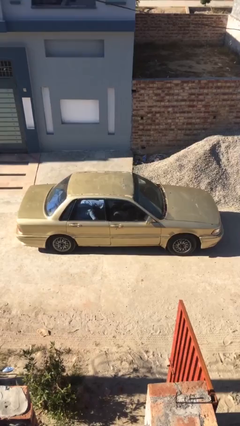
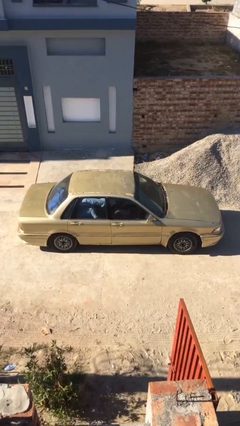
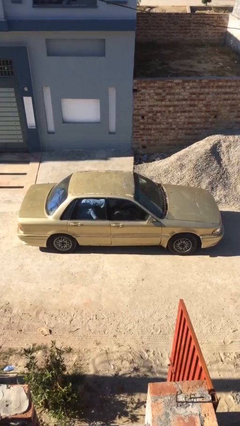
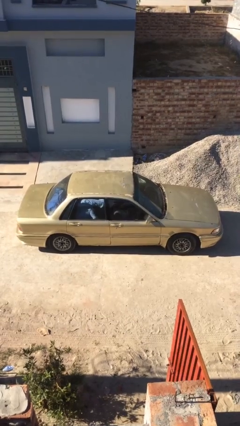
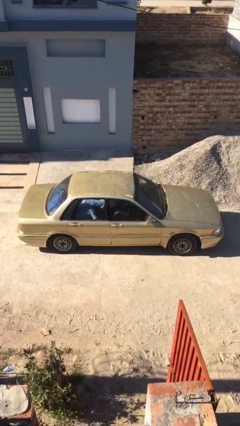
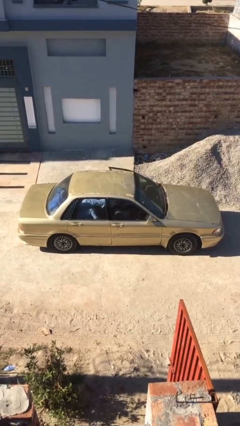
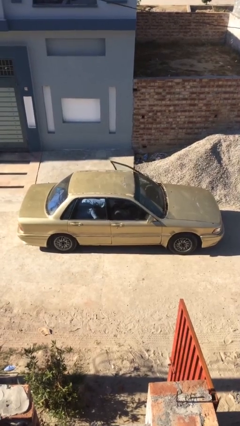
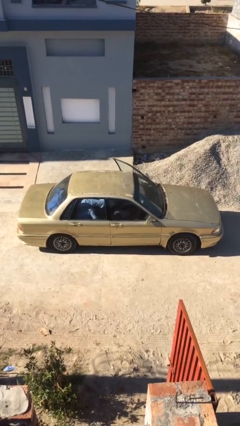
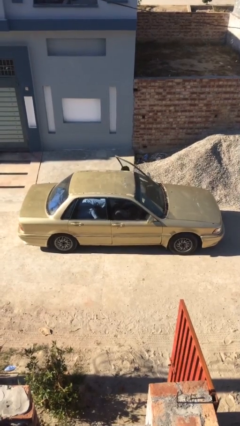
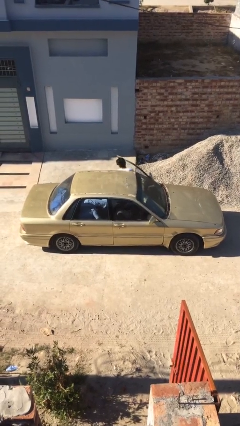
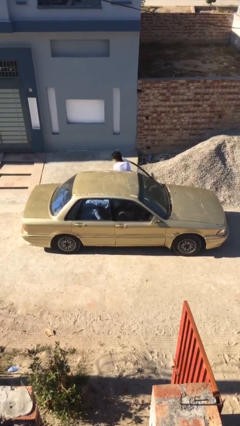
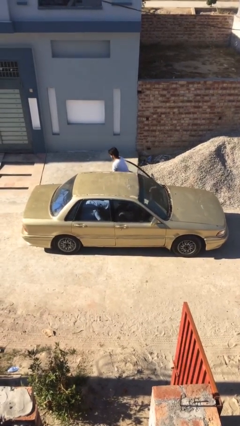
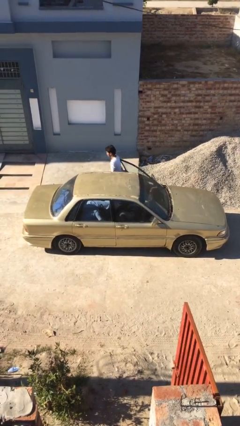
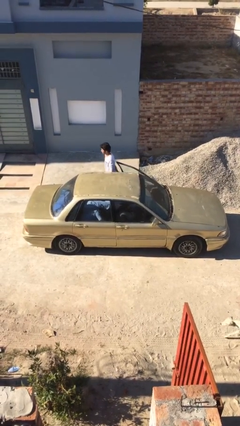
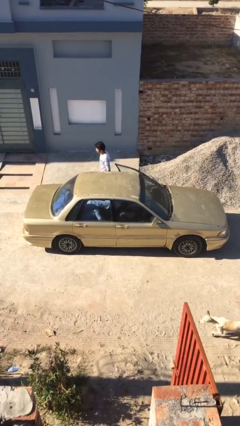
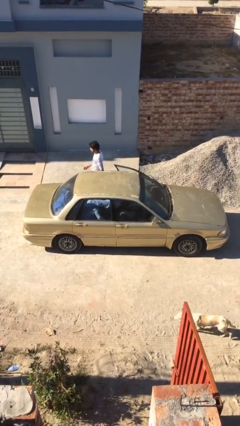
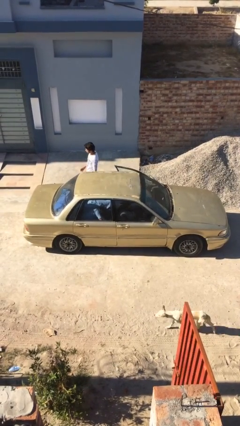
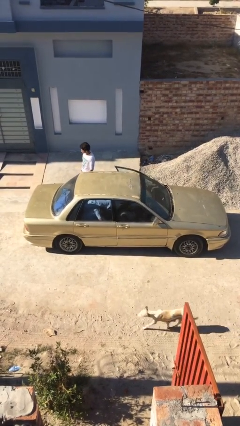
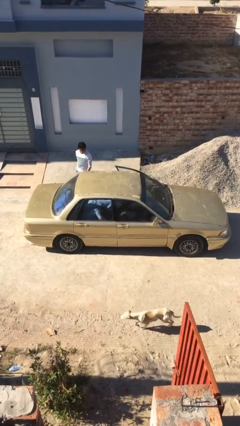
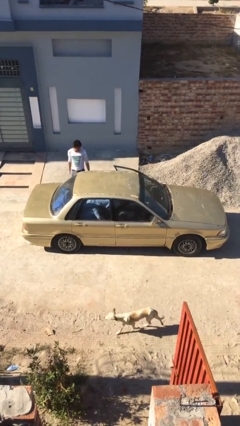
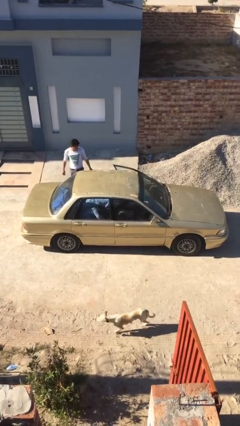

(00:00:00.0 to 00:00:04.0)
car drops off person

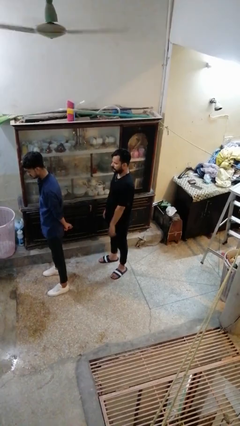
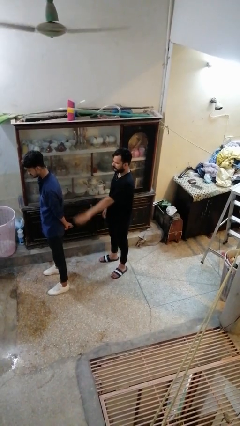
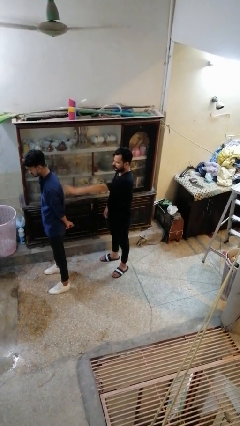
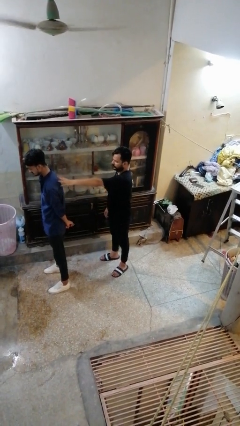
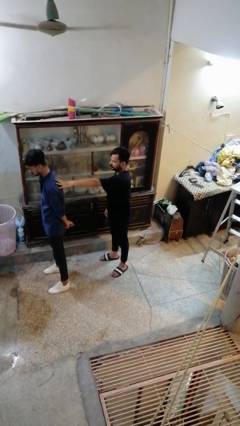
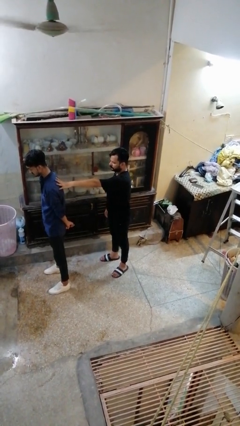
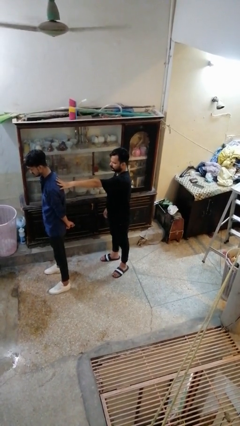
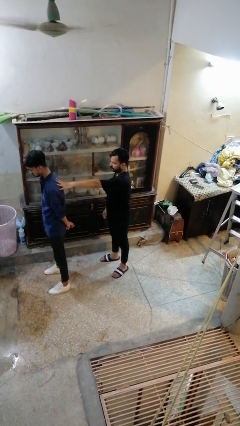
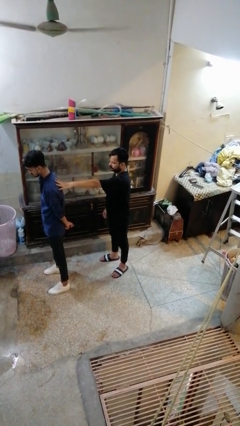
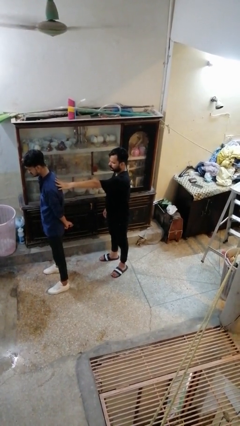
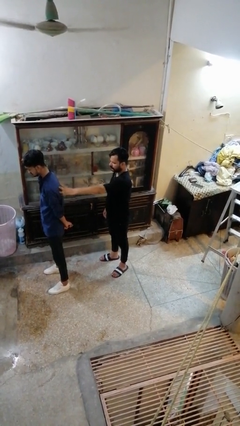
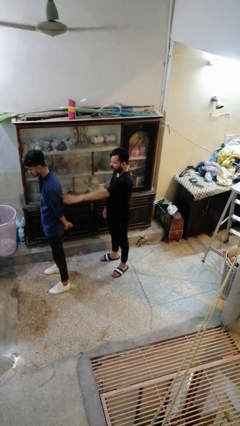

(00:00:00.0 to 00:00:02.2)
person touches back of person

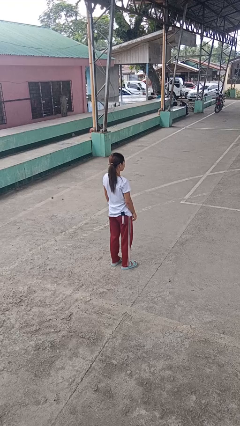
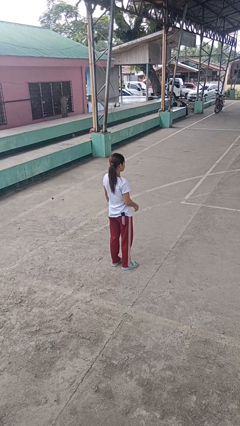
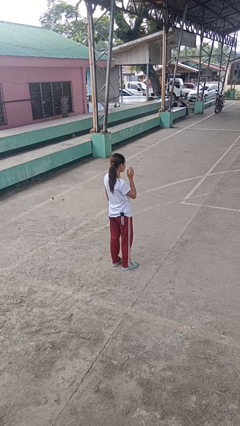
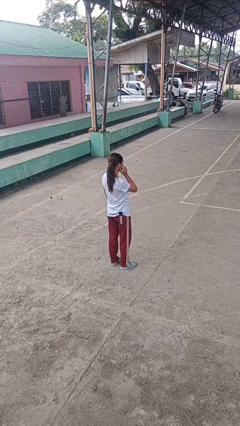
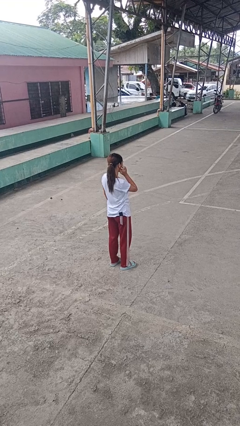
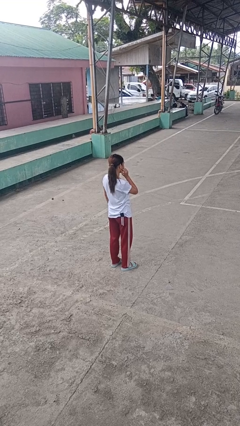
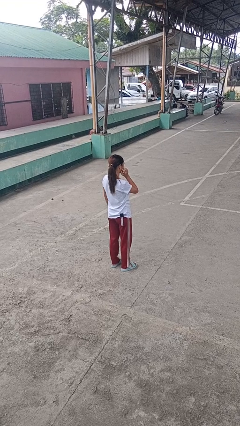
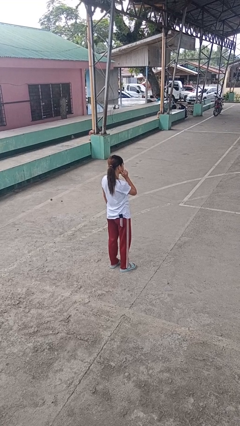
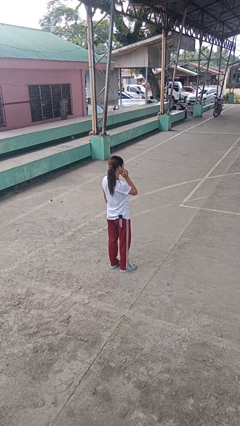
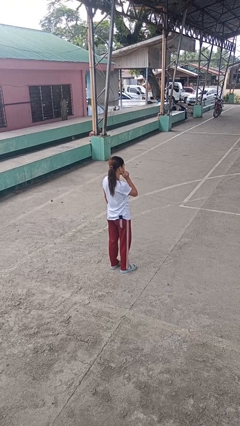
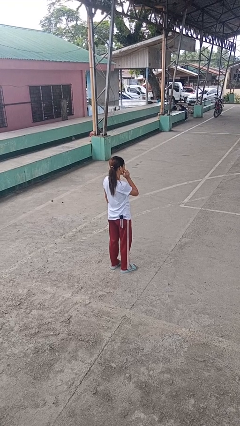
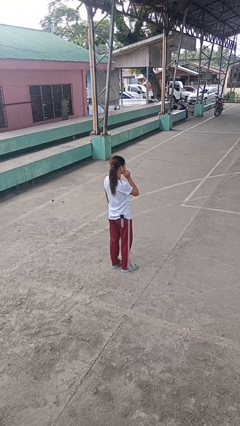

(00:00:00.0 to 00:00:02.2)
person scratches face

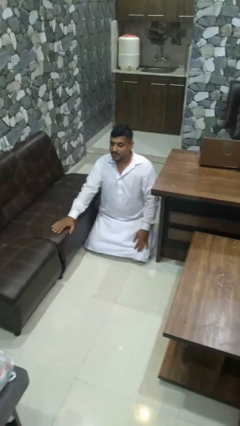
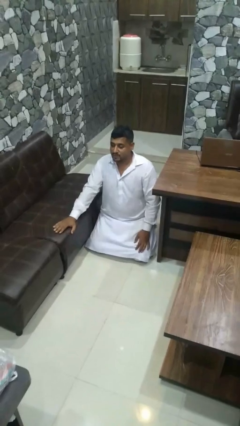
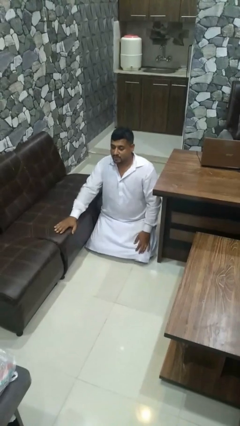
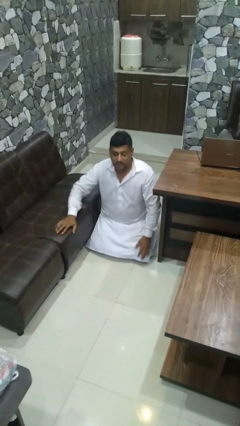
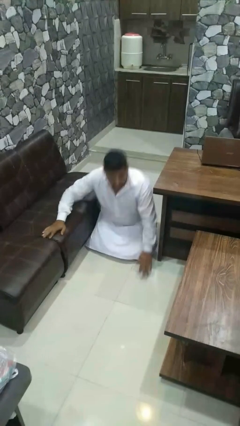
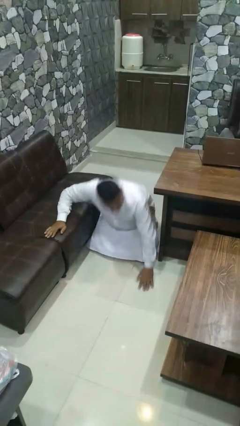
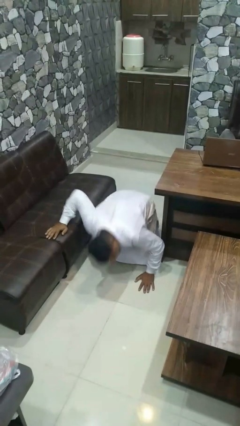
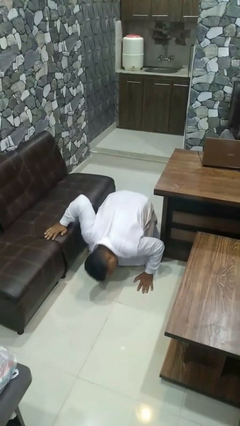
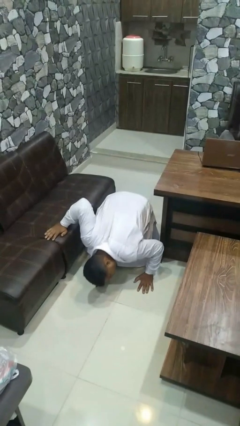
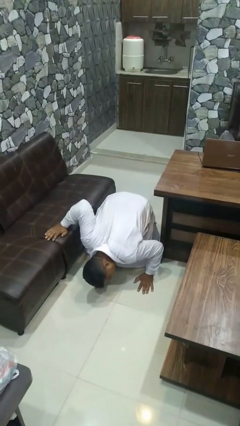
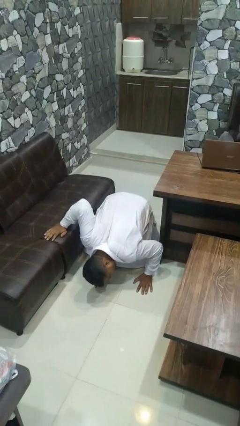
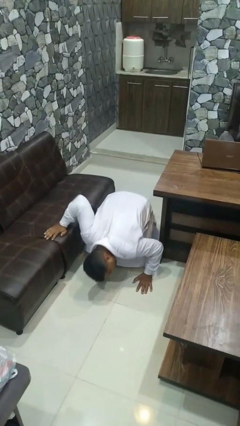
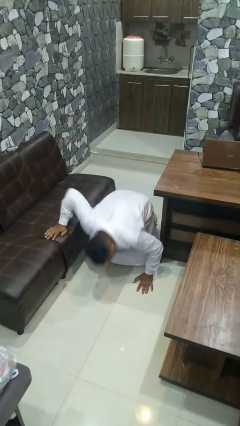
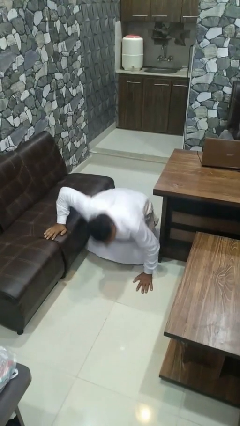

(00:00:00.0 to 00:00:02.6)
person searches under couch

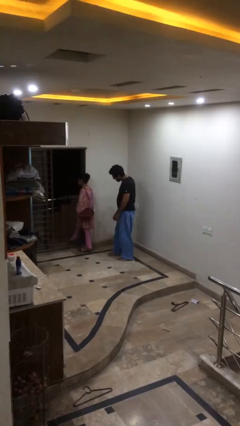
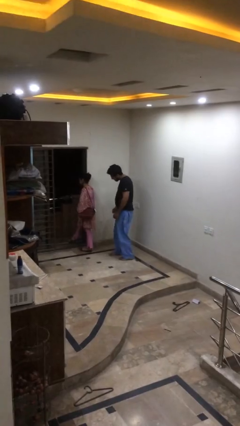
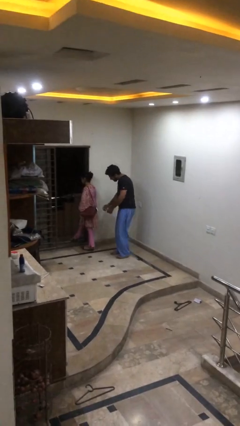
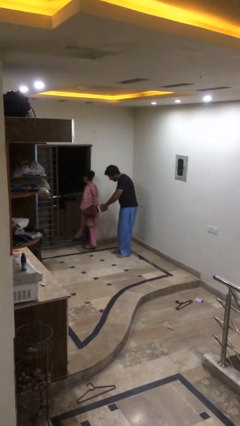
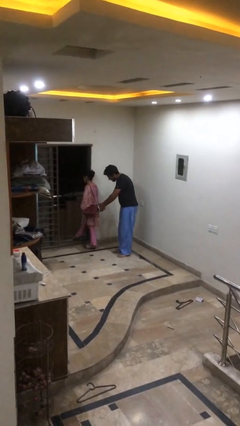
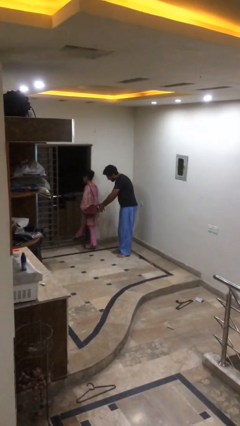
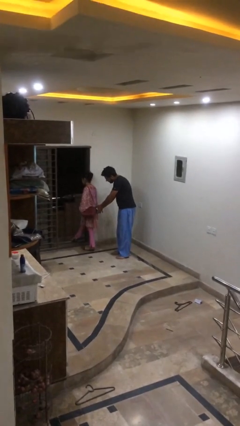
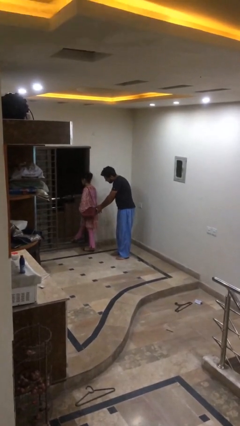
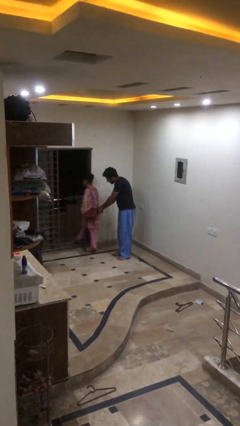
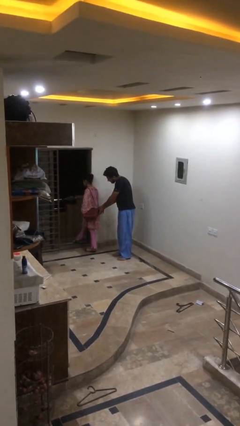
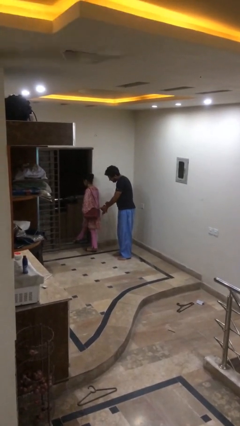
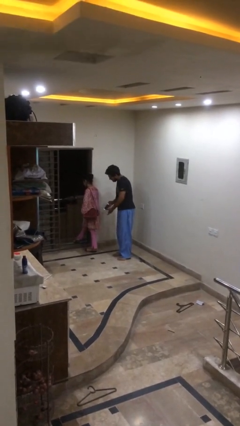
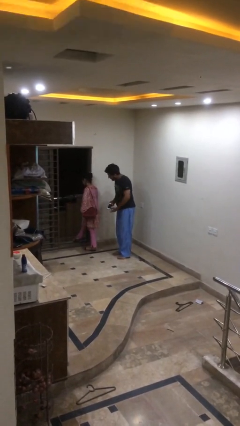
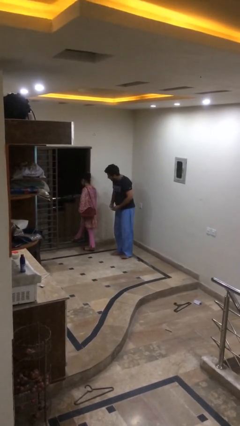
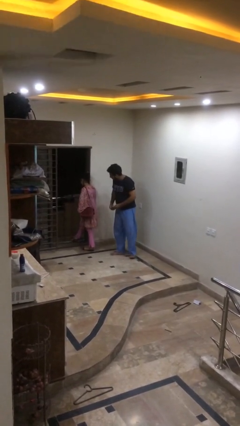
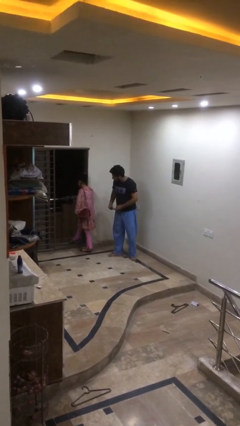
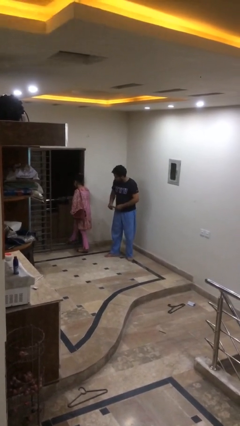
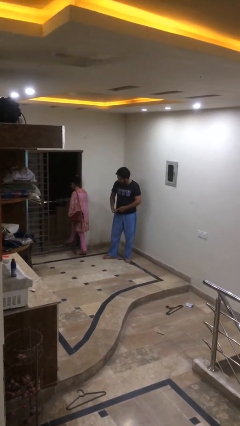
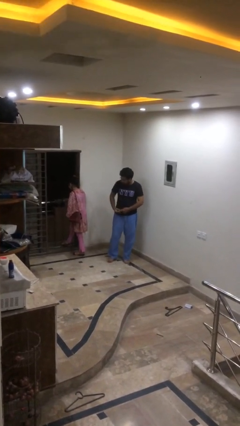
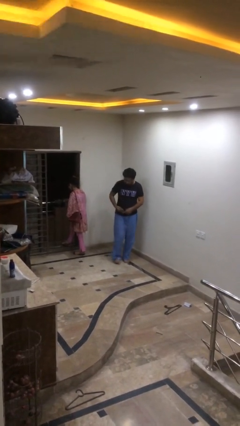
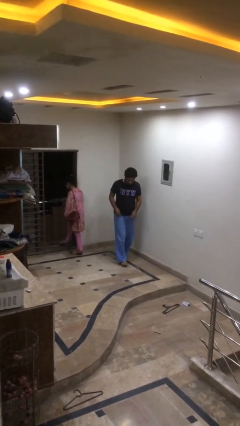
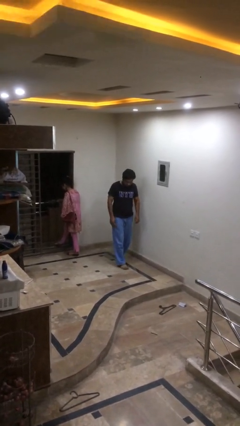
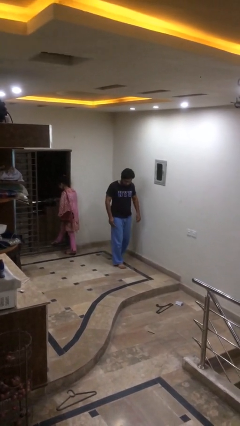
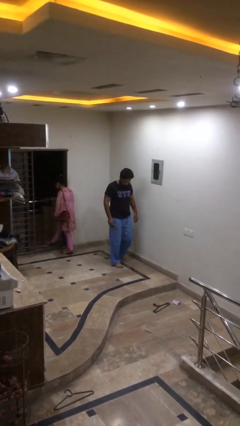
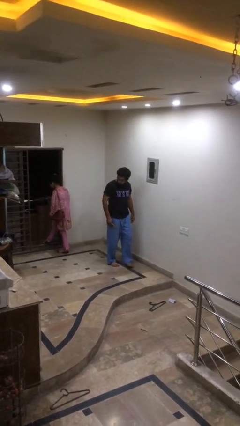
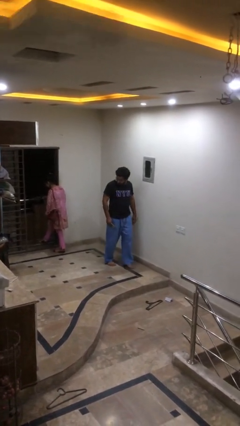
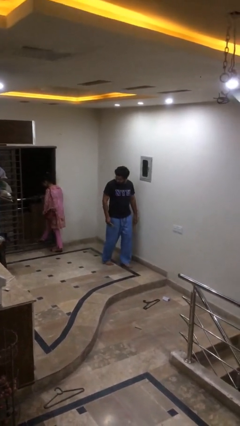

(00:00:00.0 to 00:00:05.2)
person steals object from person

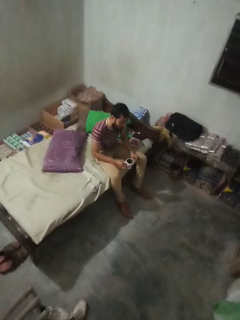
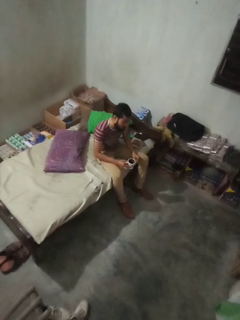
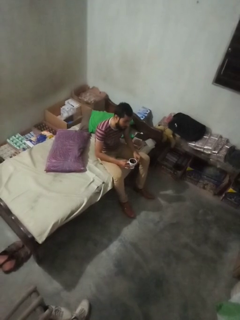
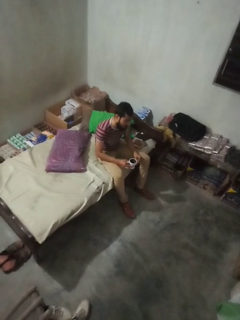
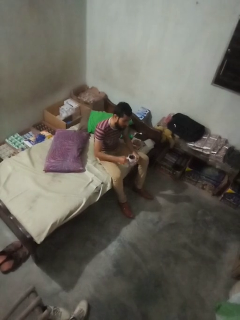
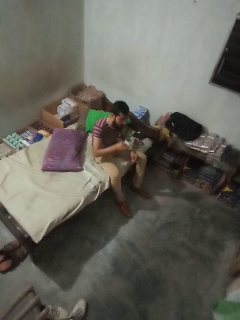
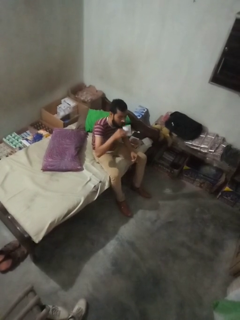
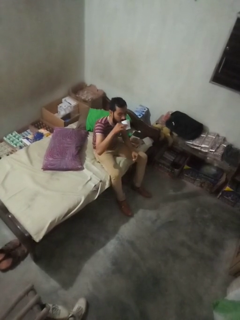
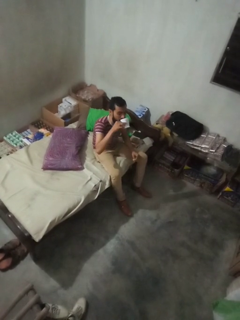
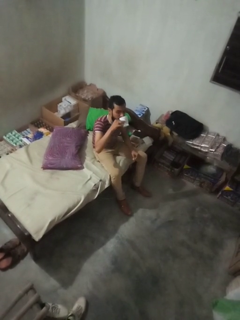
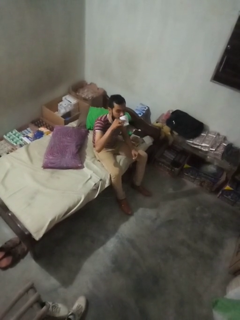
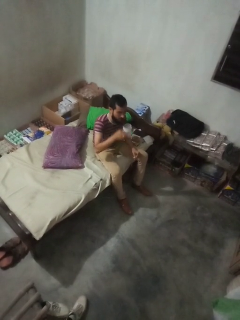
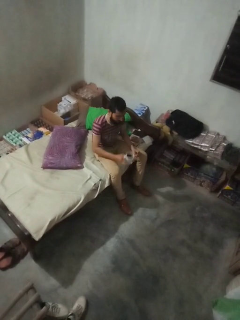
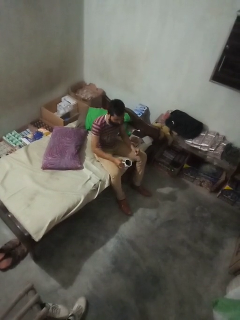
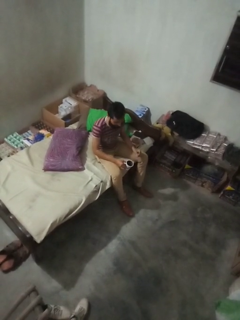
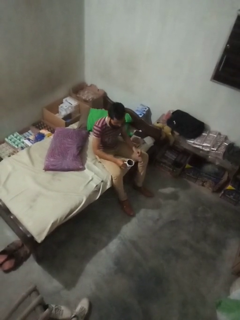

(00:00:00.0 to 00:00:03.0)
person drinks from mug
